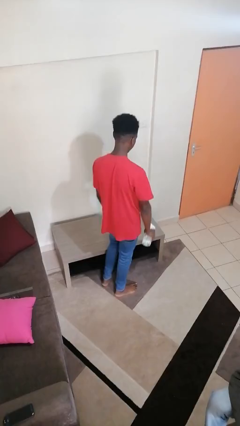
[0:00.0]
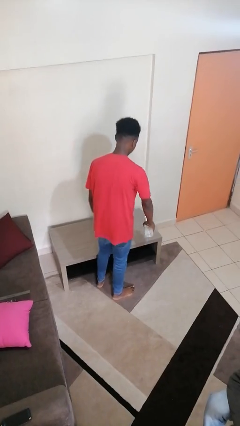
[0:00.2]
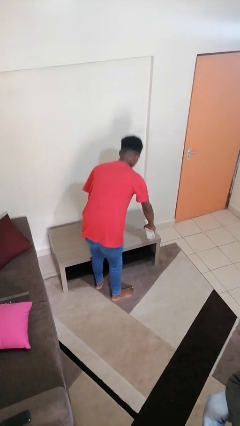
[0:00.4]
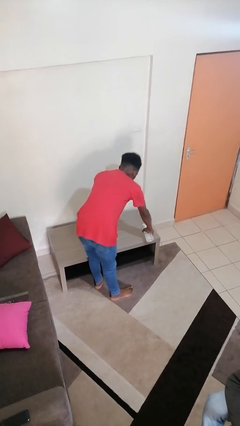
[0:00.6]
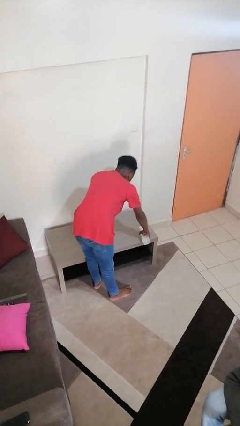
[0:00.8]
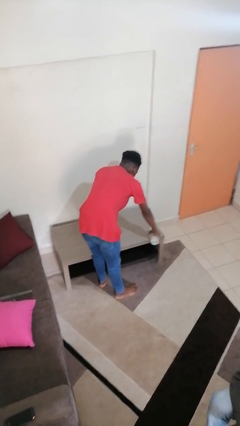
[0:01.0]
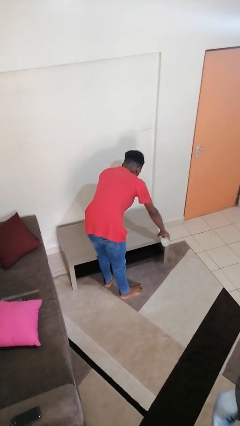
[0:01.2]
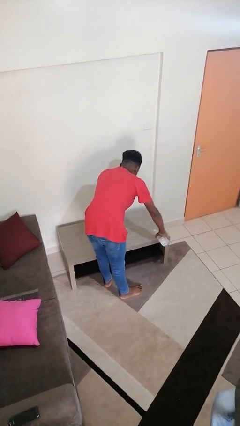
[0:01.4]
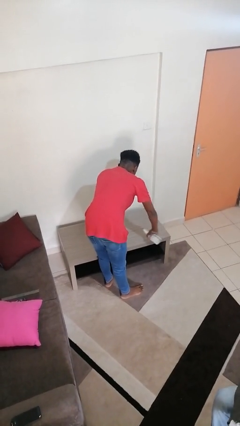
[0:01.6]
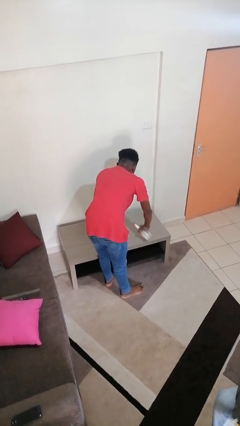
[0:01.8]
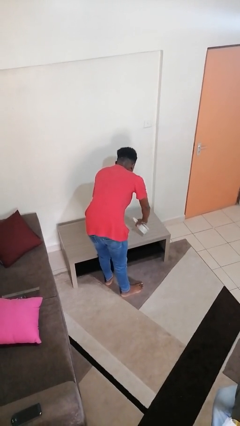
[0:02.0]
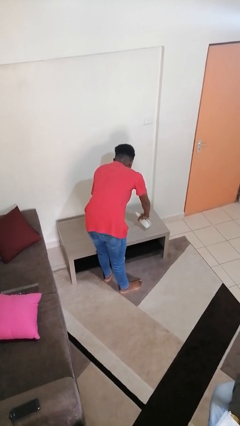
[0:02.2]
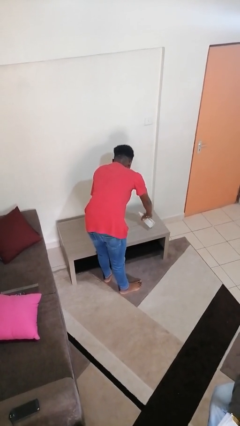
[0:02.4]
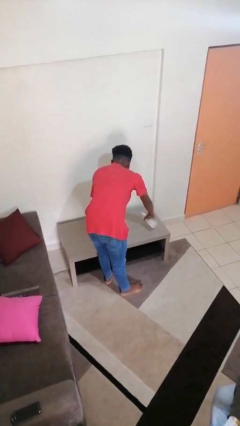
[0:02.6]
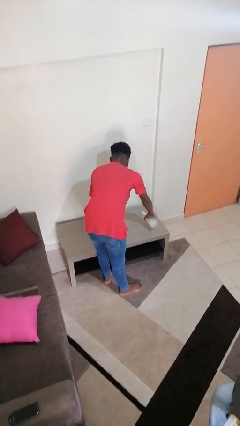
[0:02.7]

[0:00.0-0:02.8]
person sprays from bottle

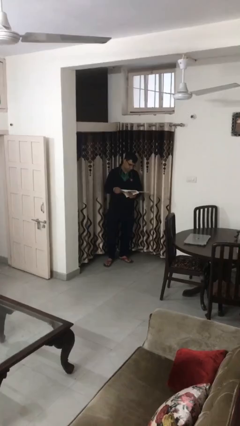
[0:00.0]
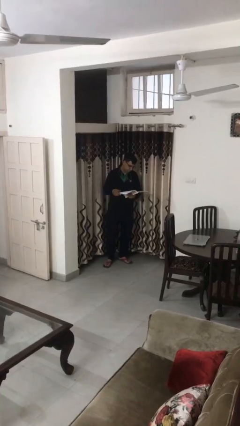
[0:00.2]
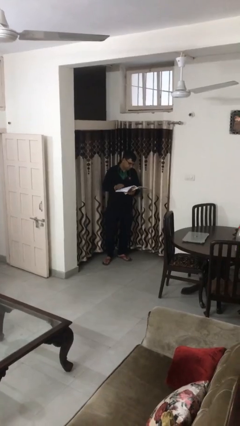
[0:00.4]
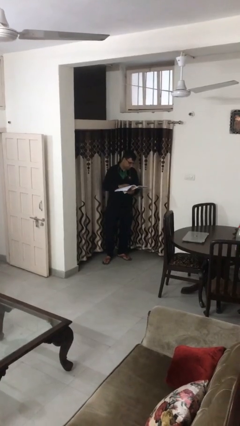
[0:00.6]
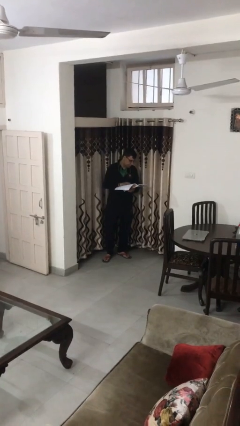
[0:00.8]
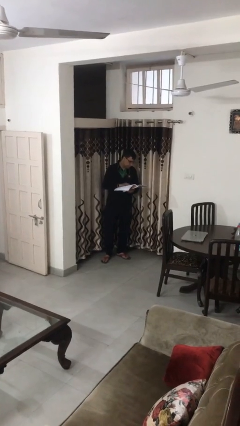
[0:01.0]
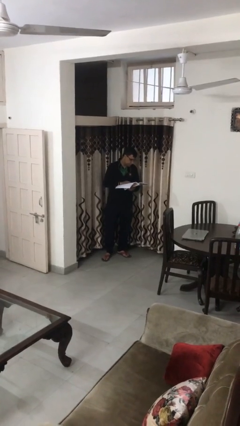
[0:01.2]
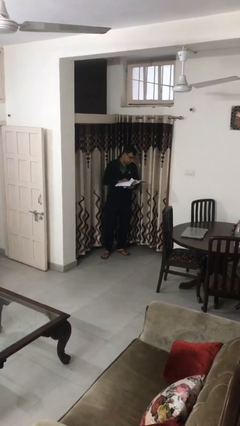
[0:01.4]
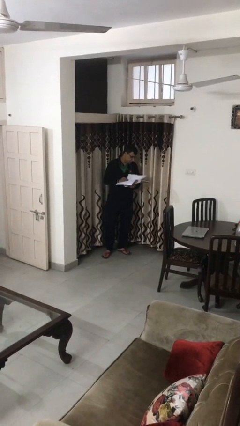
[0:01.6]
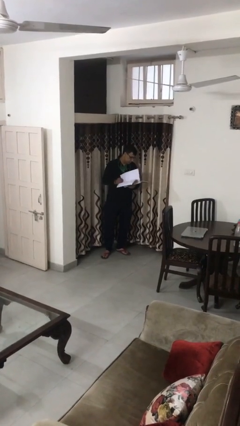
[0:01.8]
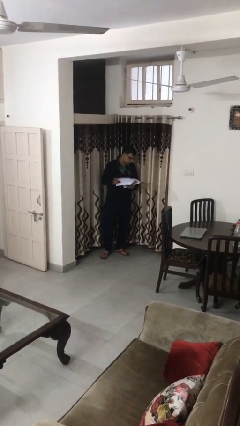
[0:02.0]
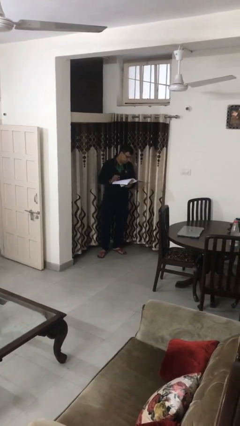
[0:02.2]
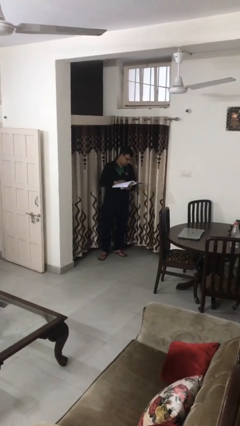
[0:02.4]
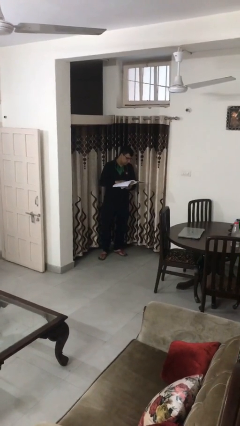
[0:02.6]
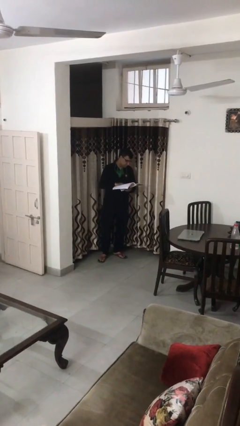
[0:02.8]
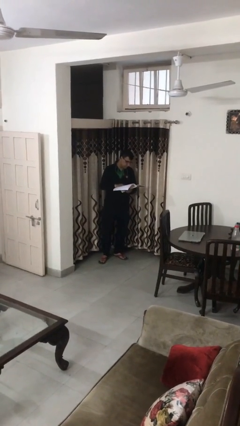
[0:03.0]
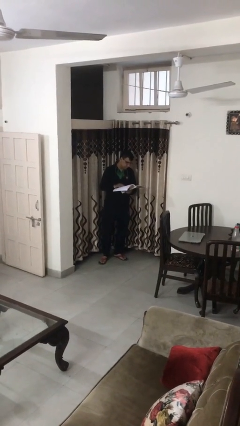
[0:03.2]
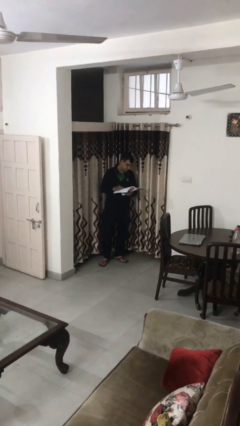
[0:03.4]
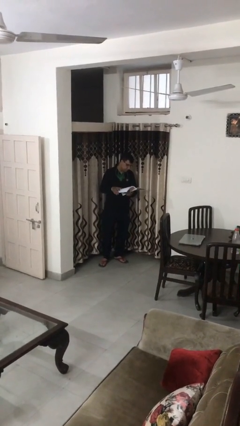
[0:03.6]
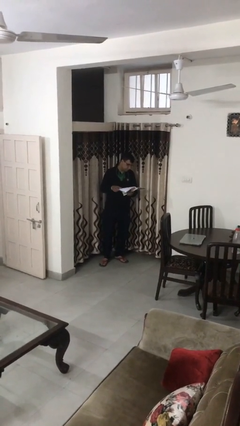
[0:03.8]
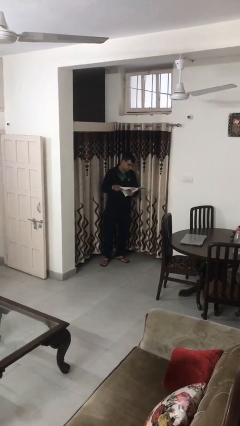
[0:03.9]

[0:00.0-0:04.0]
person reads document

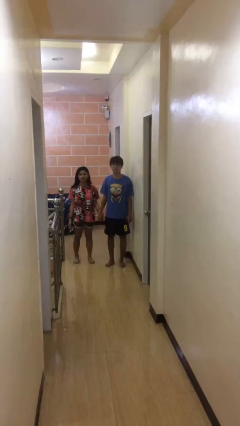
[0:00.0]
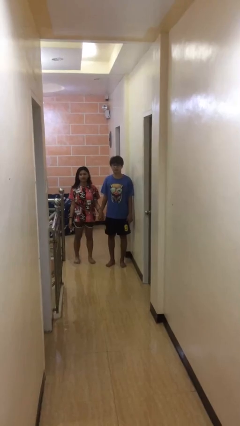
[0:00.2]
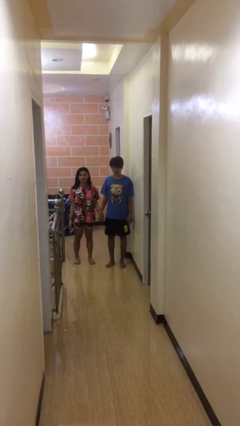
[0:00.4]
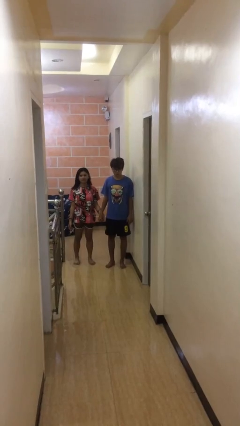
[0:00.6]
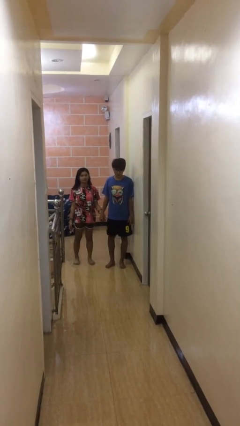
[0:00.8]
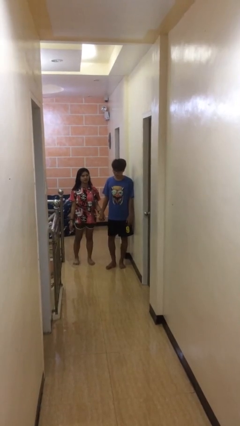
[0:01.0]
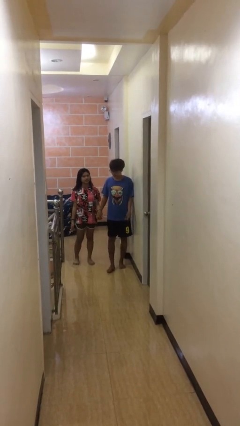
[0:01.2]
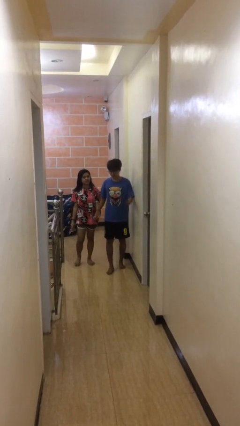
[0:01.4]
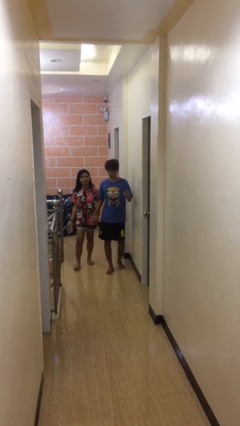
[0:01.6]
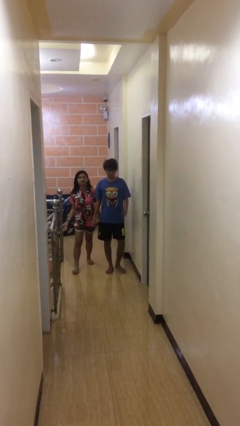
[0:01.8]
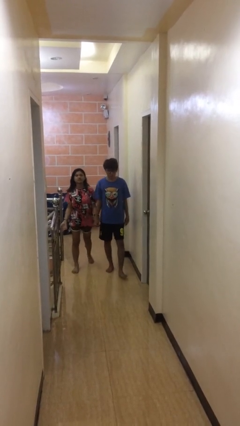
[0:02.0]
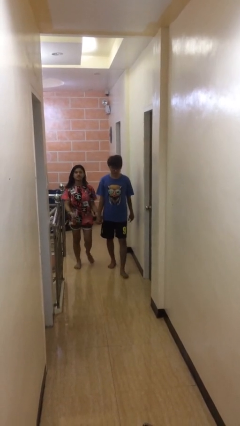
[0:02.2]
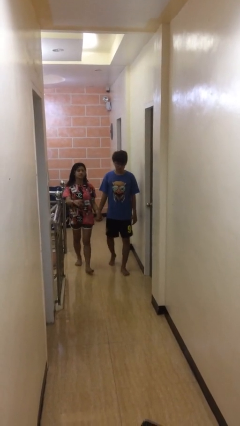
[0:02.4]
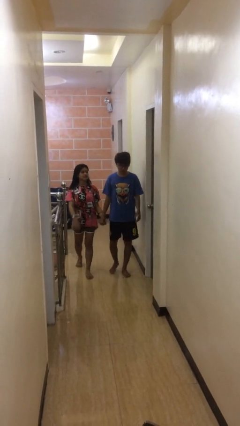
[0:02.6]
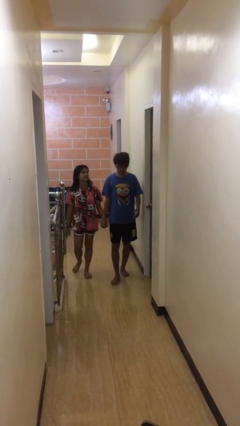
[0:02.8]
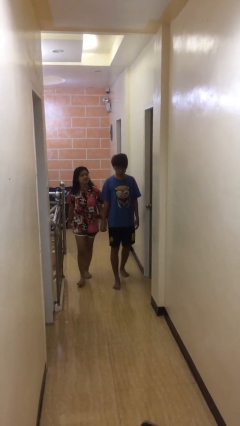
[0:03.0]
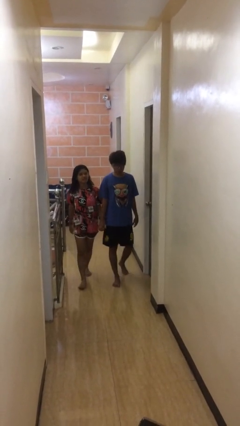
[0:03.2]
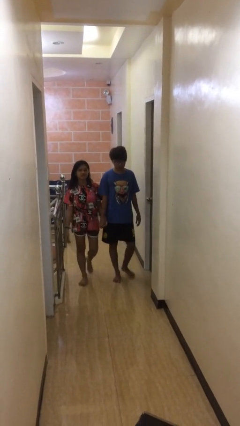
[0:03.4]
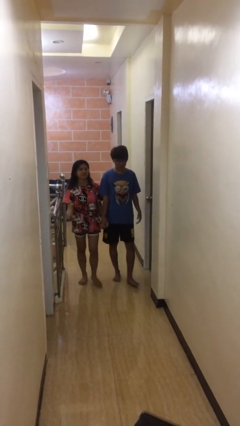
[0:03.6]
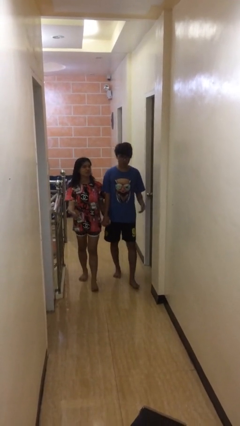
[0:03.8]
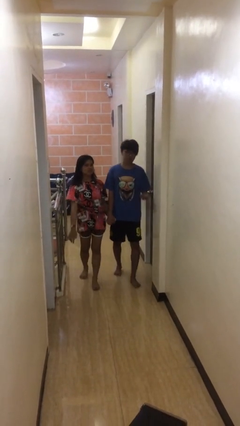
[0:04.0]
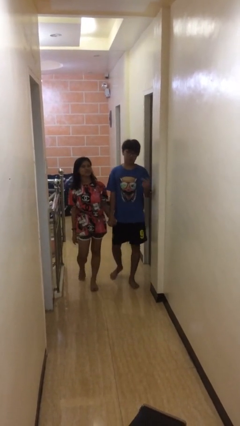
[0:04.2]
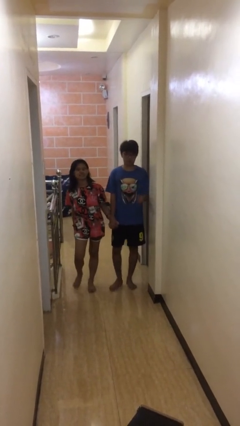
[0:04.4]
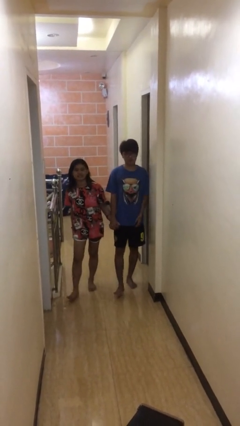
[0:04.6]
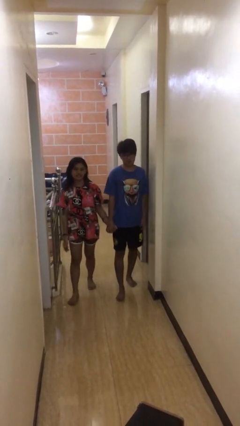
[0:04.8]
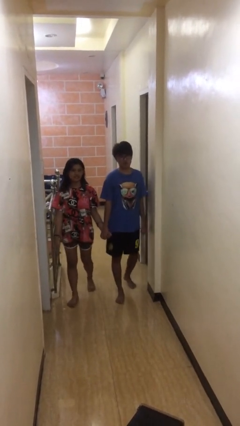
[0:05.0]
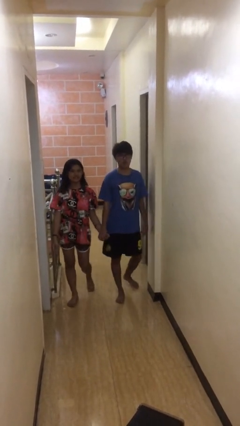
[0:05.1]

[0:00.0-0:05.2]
person holds hand

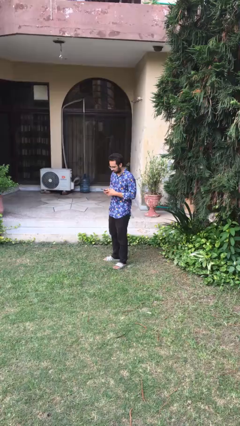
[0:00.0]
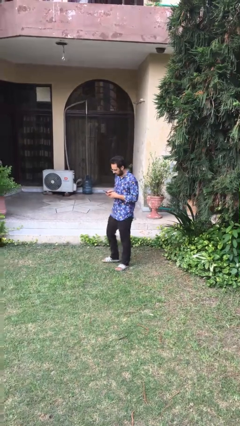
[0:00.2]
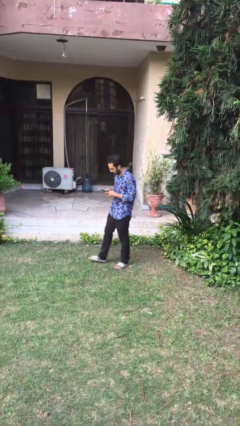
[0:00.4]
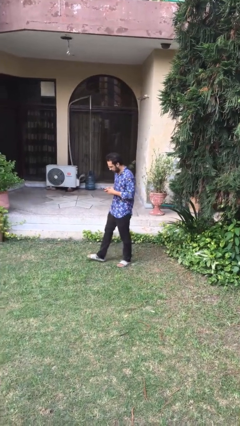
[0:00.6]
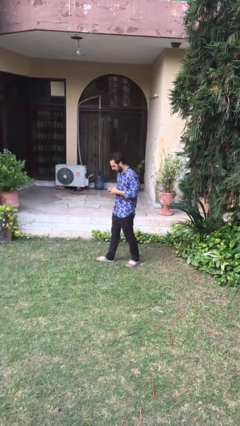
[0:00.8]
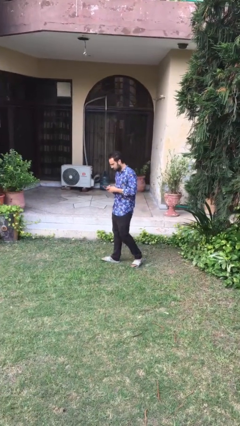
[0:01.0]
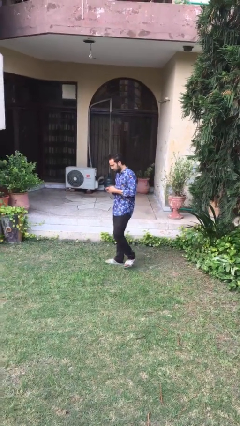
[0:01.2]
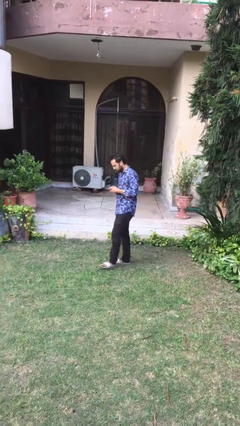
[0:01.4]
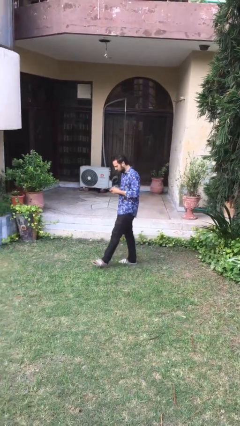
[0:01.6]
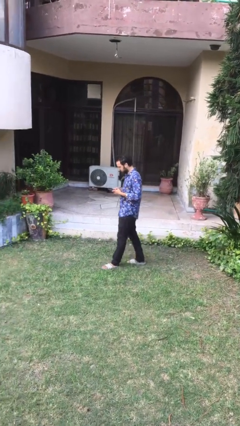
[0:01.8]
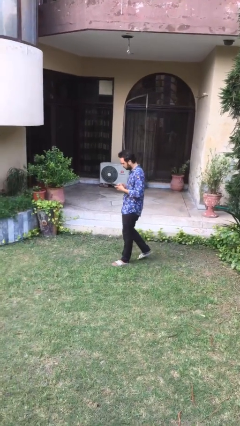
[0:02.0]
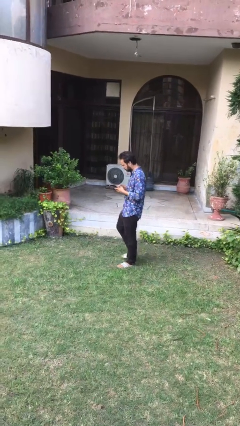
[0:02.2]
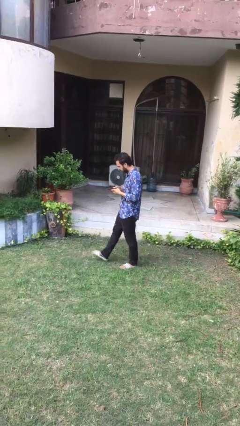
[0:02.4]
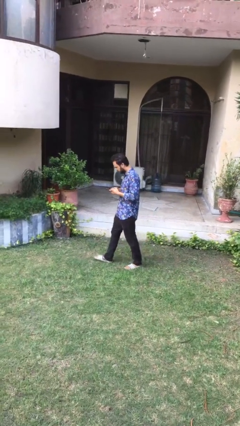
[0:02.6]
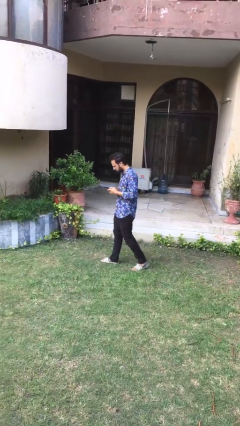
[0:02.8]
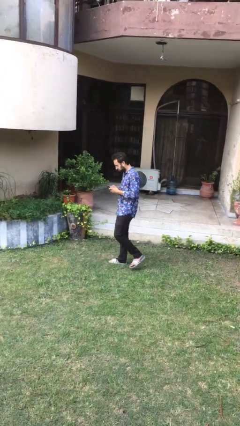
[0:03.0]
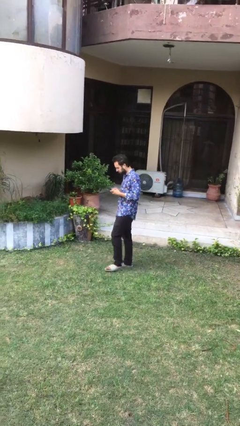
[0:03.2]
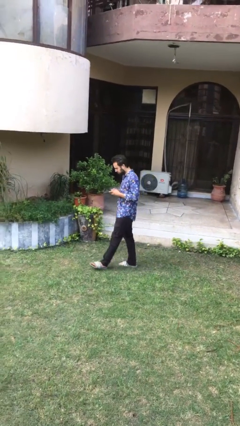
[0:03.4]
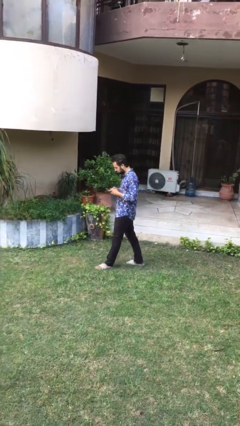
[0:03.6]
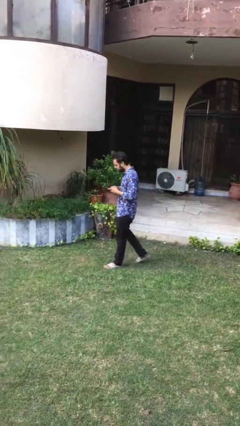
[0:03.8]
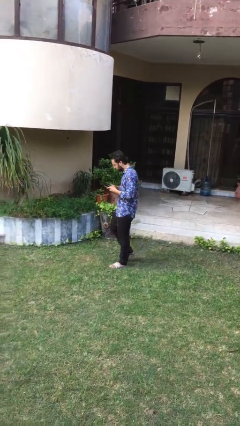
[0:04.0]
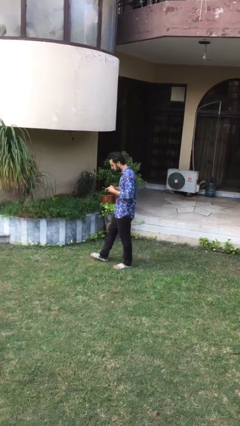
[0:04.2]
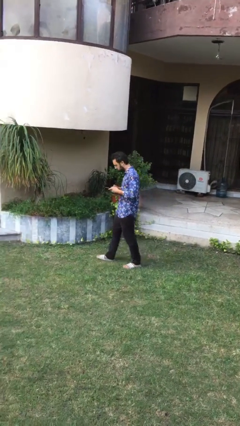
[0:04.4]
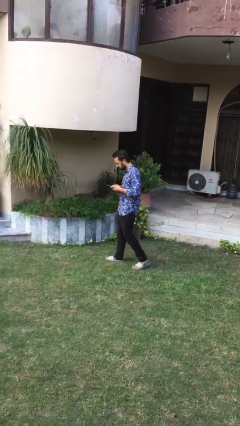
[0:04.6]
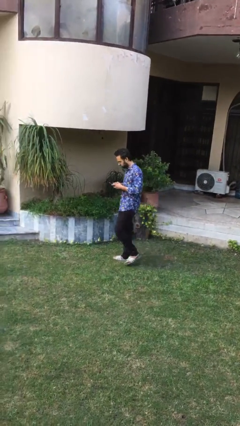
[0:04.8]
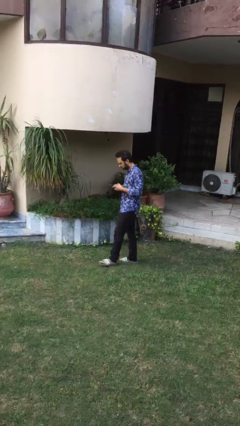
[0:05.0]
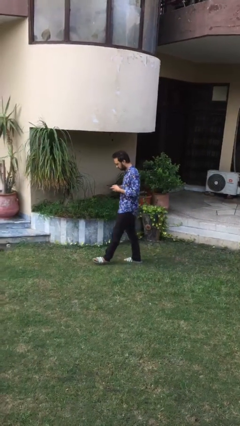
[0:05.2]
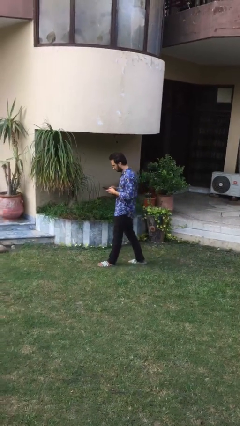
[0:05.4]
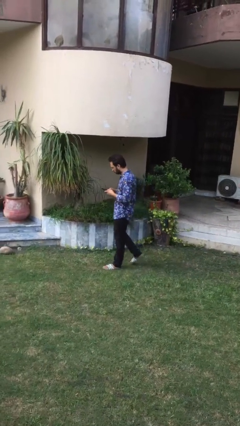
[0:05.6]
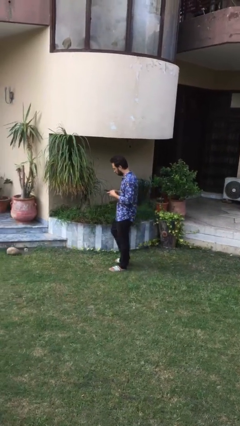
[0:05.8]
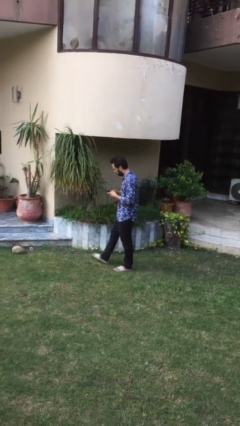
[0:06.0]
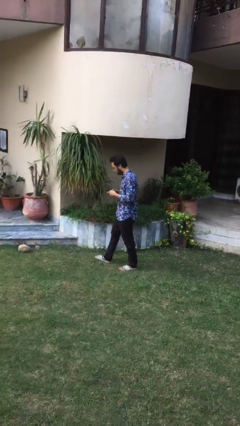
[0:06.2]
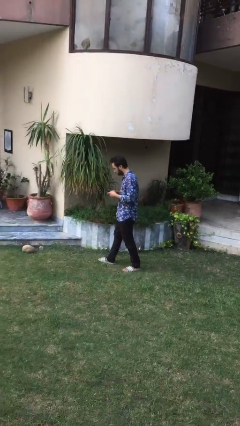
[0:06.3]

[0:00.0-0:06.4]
person texts on phone
